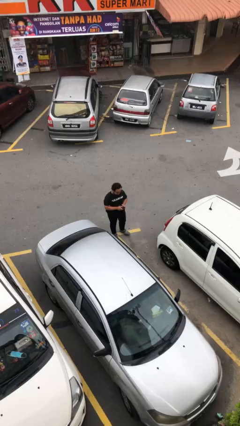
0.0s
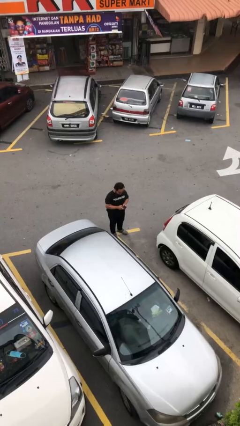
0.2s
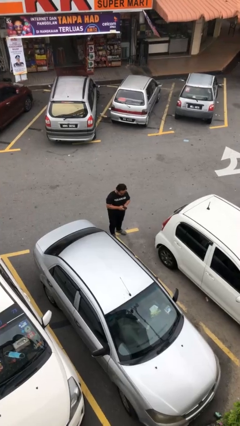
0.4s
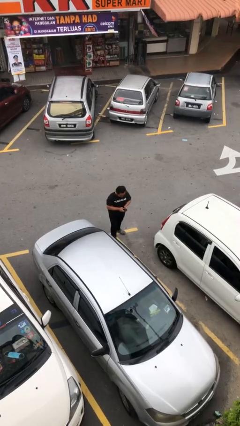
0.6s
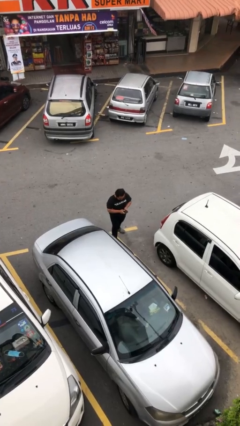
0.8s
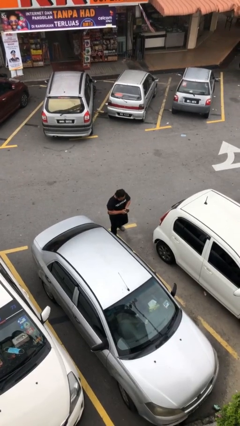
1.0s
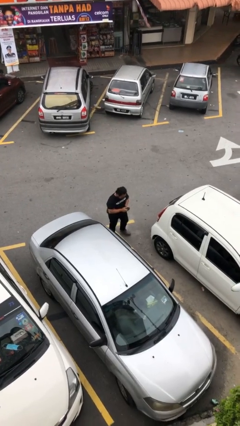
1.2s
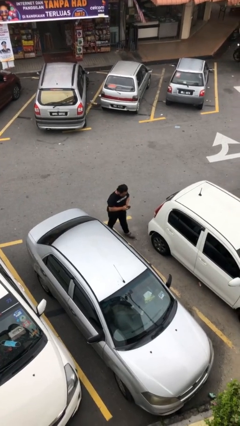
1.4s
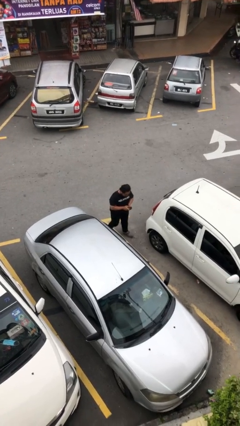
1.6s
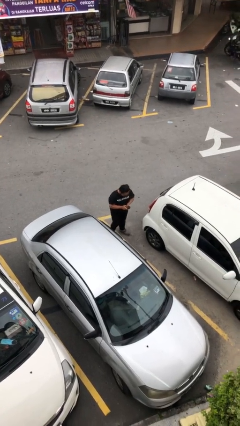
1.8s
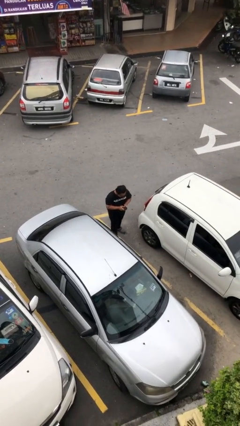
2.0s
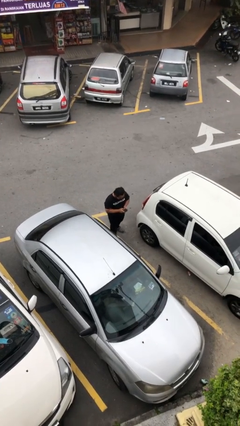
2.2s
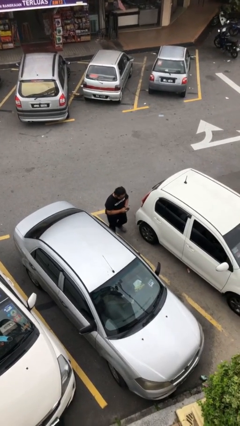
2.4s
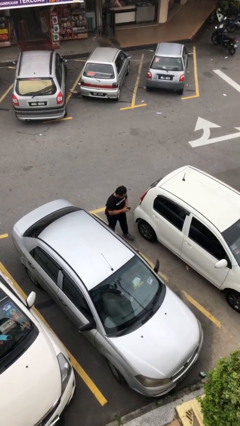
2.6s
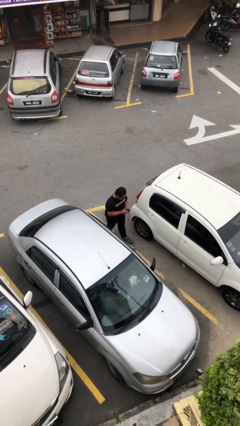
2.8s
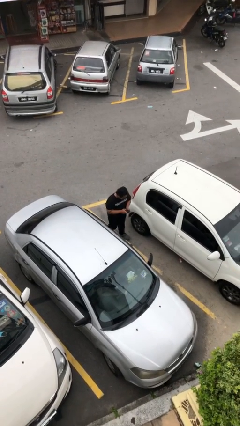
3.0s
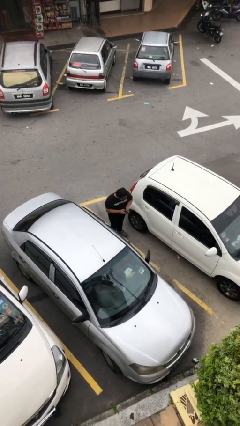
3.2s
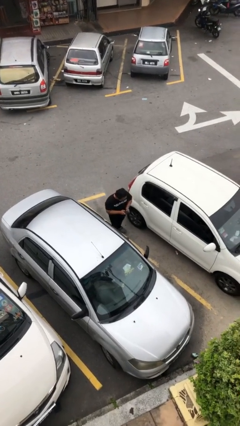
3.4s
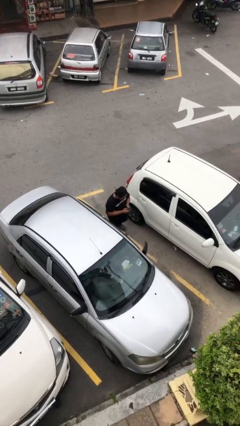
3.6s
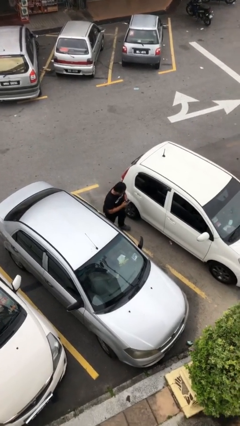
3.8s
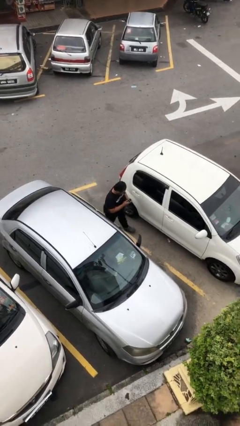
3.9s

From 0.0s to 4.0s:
person texts on phone

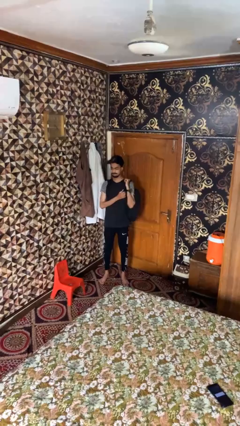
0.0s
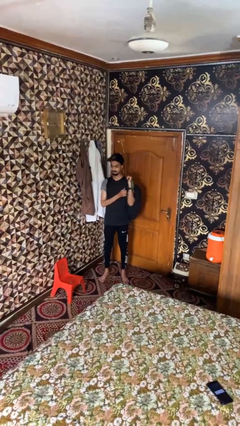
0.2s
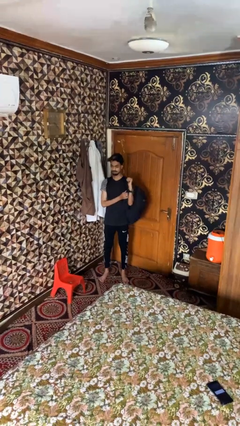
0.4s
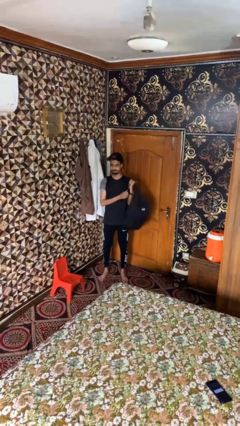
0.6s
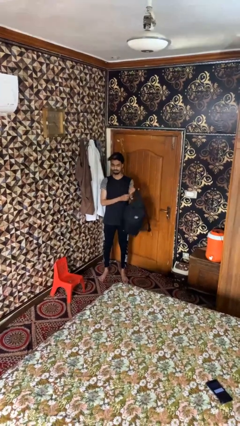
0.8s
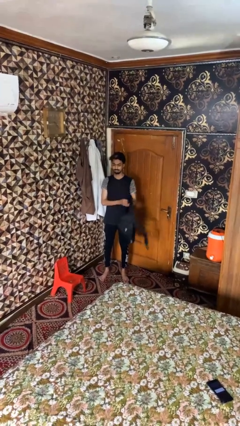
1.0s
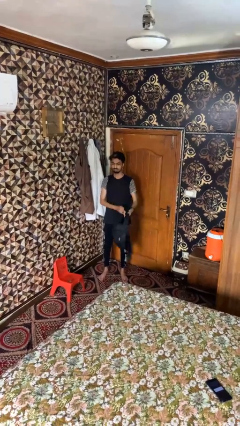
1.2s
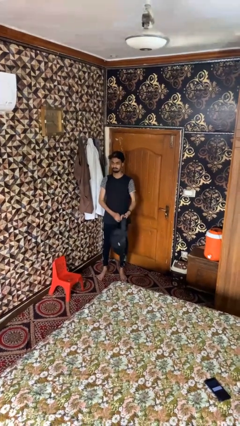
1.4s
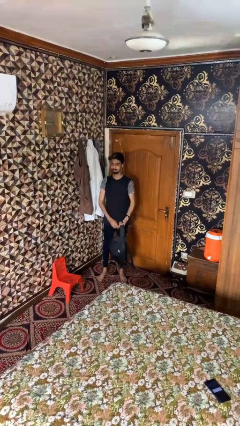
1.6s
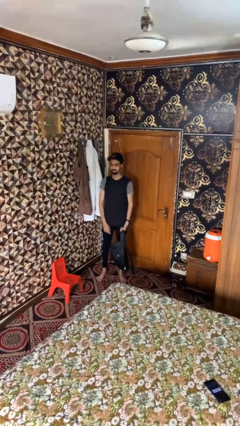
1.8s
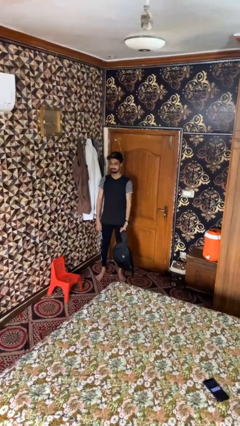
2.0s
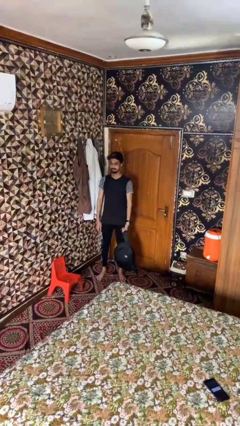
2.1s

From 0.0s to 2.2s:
person takes off backpack

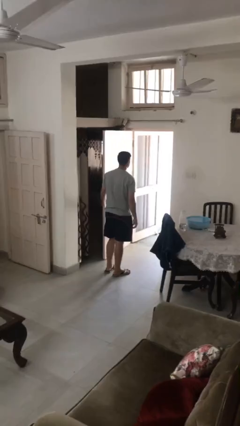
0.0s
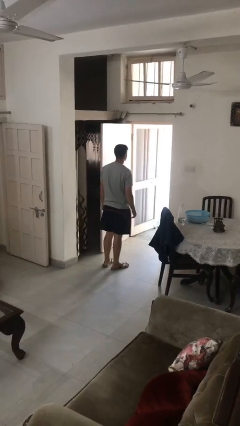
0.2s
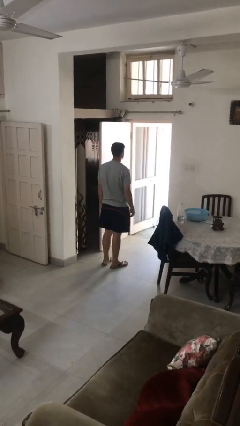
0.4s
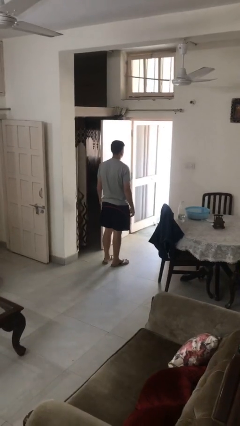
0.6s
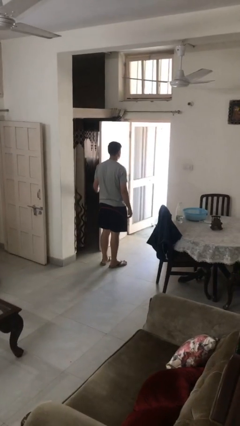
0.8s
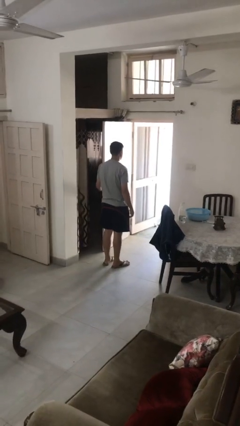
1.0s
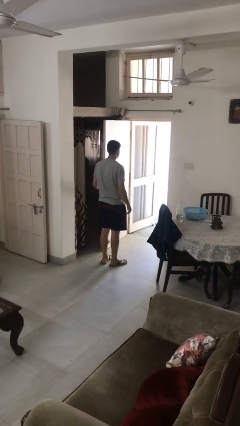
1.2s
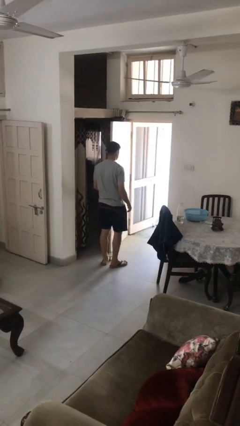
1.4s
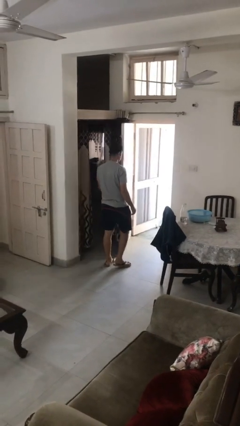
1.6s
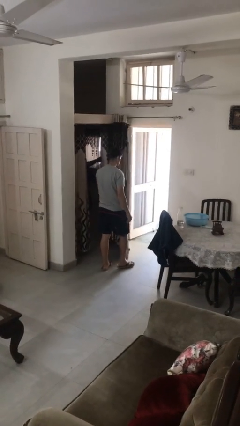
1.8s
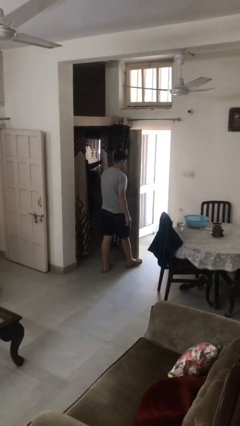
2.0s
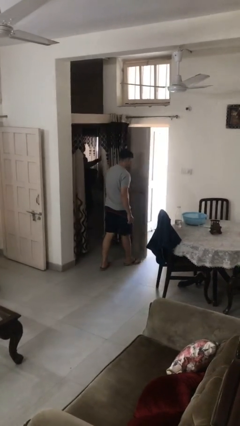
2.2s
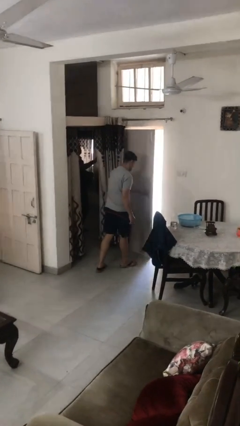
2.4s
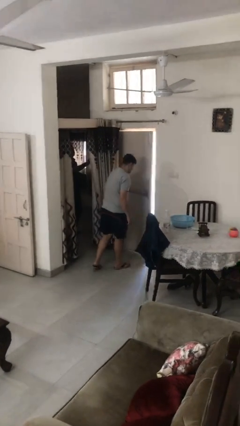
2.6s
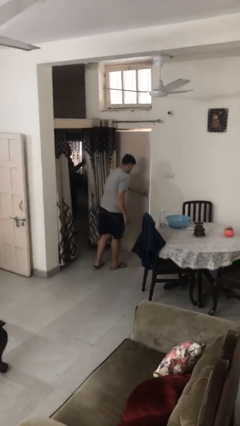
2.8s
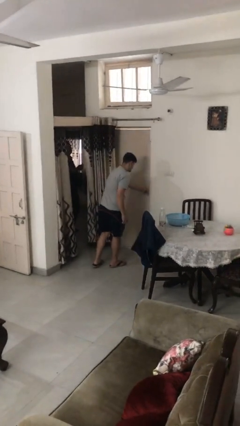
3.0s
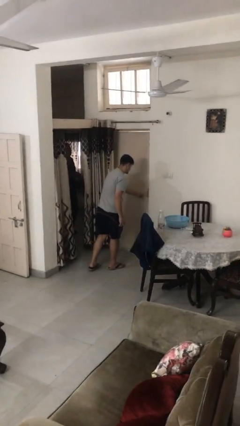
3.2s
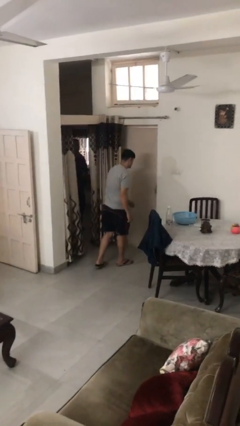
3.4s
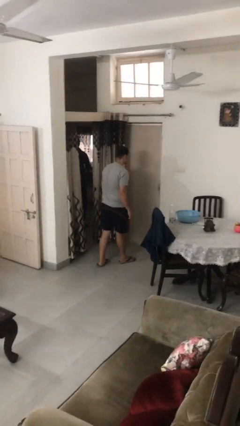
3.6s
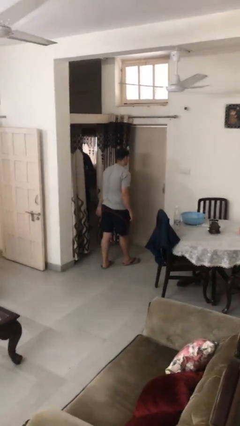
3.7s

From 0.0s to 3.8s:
person closes facility door

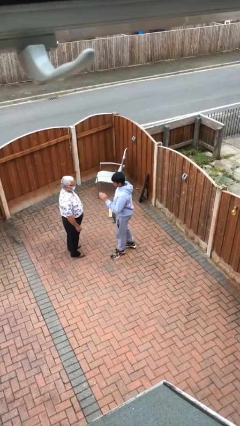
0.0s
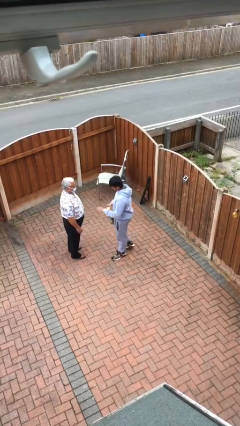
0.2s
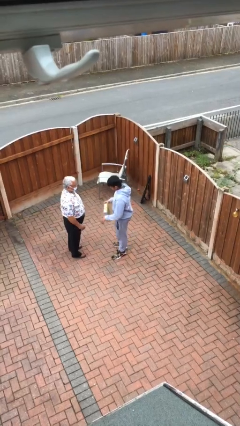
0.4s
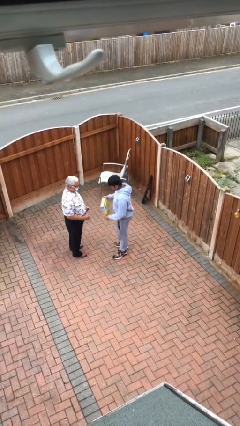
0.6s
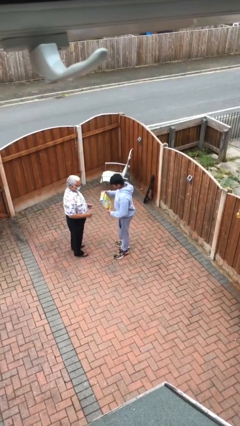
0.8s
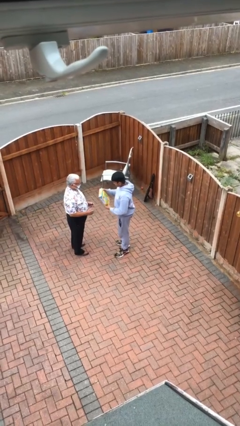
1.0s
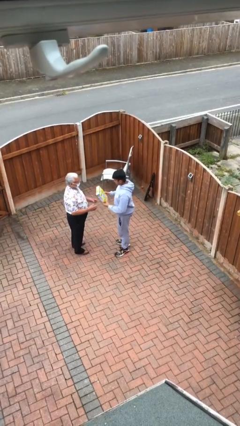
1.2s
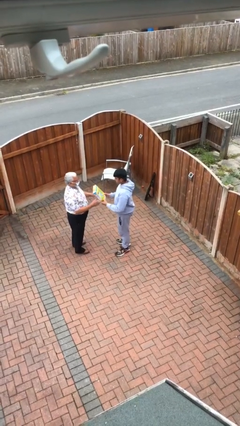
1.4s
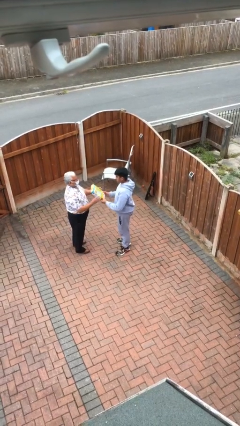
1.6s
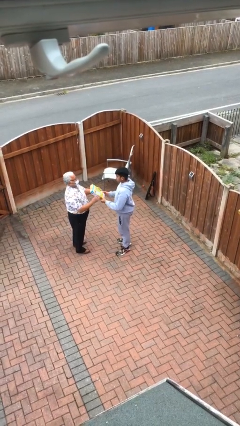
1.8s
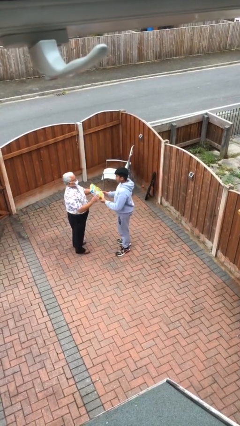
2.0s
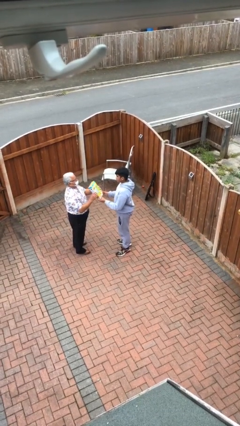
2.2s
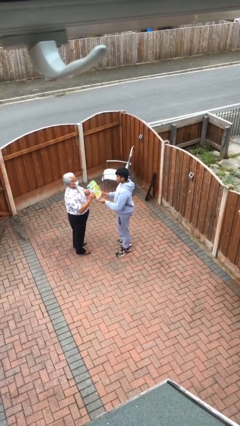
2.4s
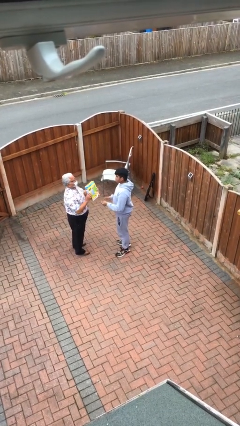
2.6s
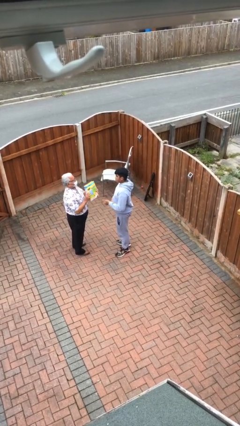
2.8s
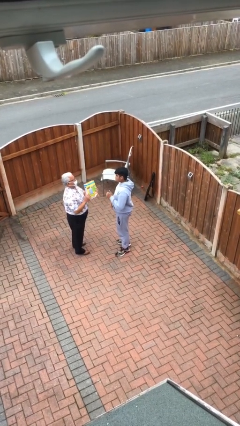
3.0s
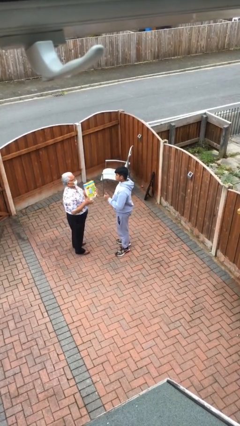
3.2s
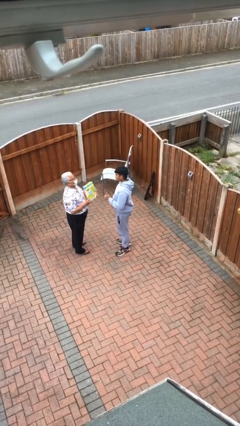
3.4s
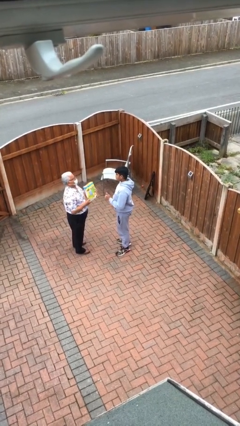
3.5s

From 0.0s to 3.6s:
person transfers object to person

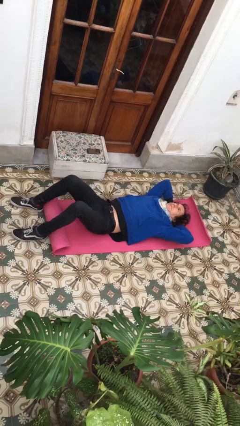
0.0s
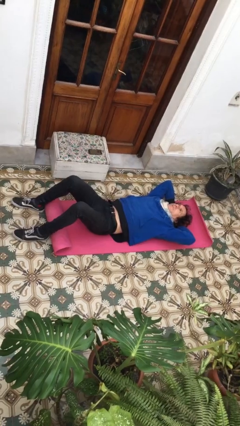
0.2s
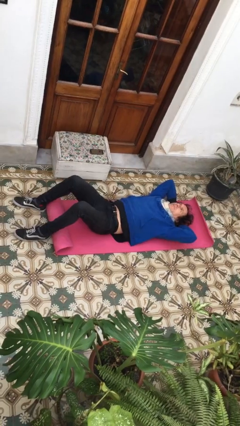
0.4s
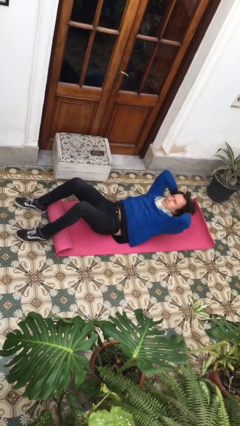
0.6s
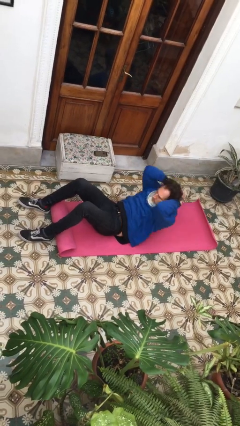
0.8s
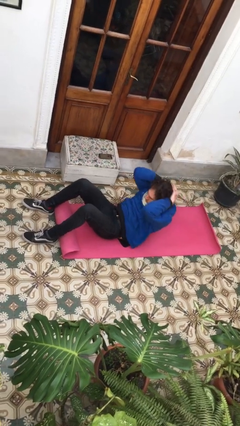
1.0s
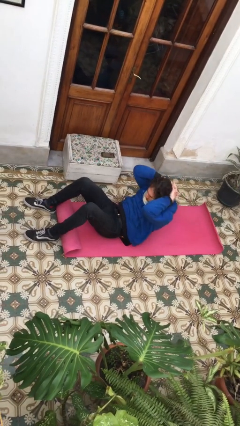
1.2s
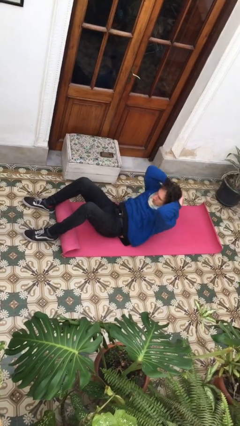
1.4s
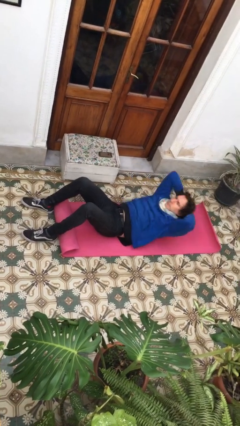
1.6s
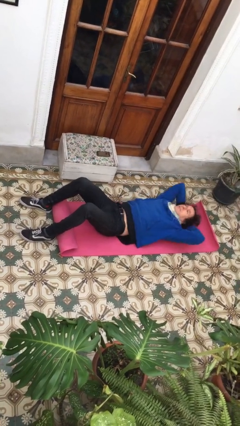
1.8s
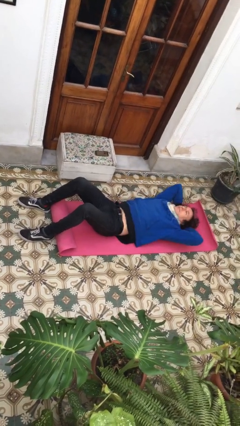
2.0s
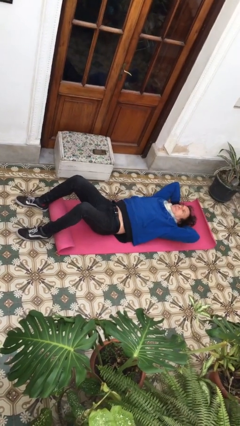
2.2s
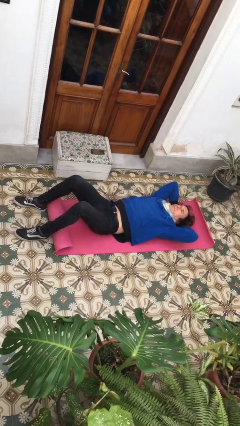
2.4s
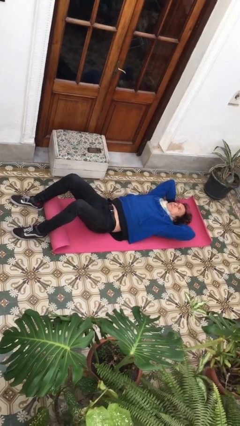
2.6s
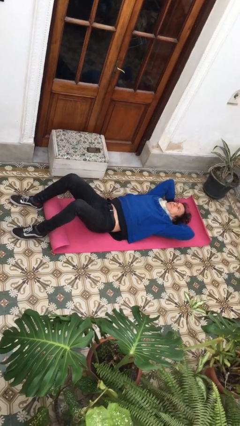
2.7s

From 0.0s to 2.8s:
person exercises with situp

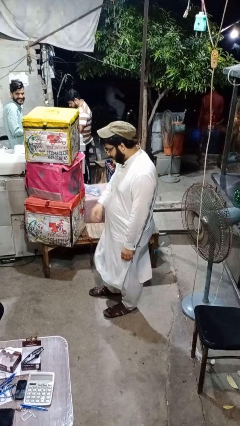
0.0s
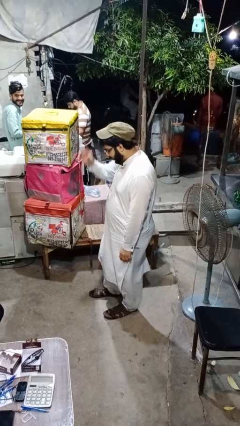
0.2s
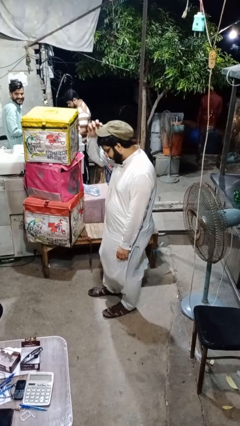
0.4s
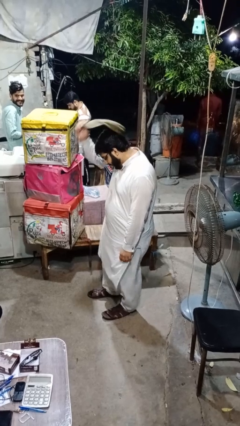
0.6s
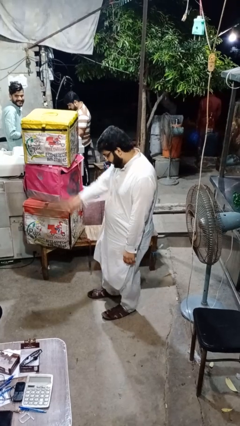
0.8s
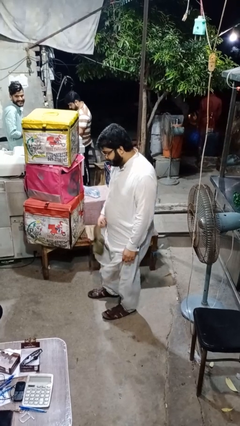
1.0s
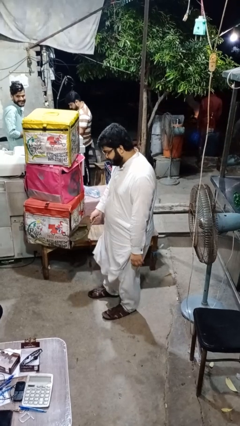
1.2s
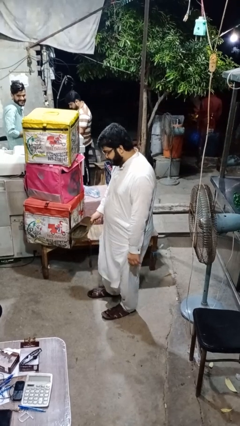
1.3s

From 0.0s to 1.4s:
person takes off hat
